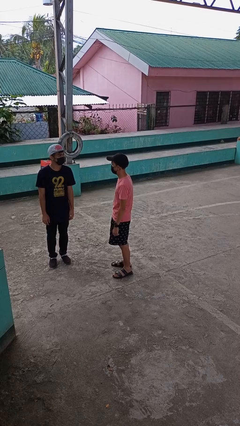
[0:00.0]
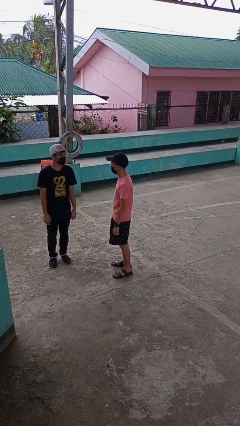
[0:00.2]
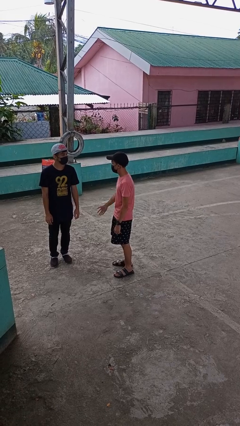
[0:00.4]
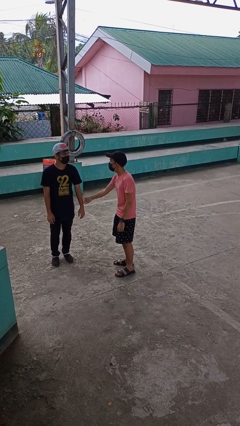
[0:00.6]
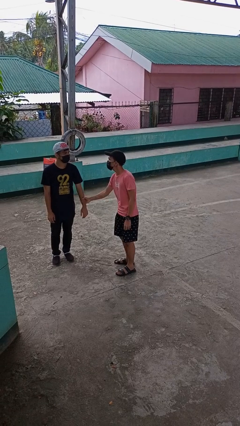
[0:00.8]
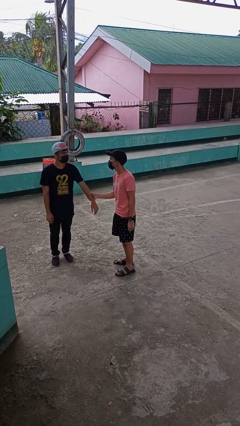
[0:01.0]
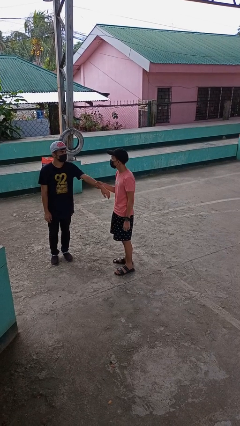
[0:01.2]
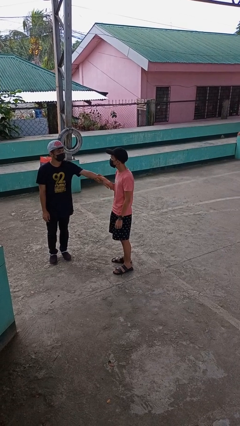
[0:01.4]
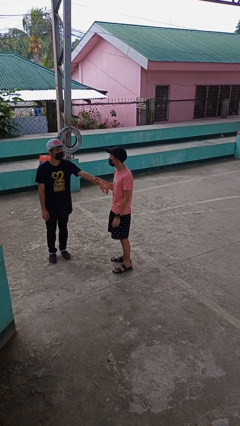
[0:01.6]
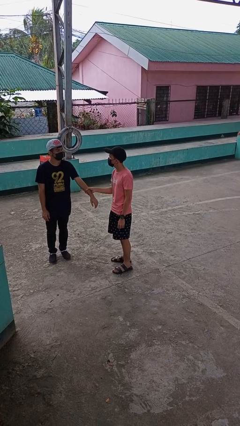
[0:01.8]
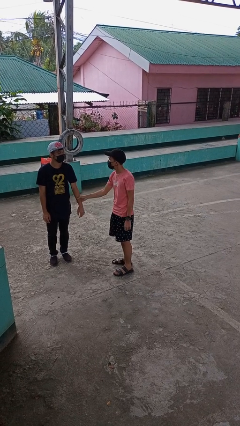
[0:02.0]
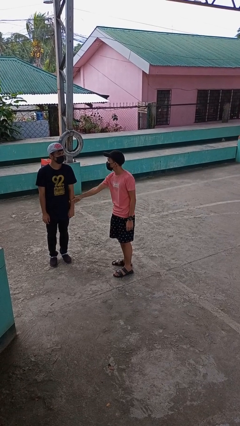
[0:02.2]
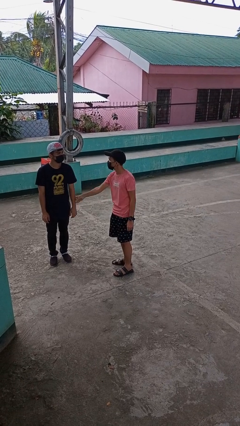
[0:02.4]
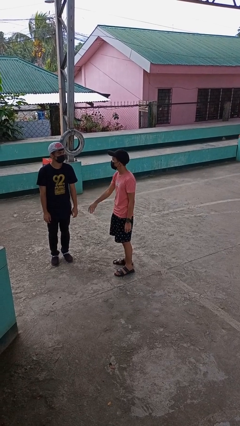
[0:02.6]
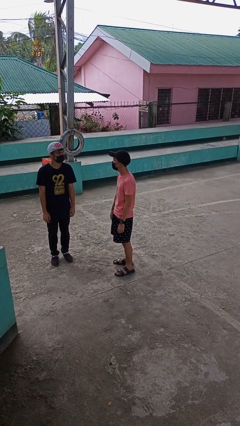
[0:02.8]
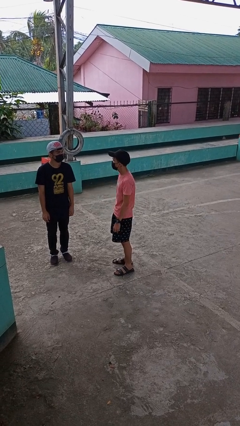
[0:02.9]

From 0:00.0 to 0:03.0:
person grabs person by forearm

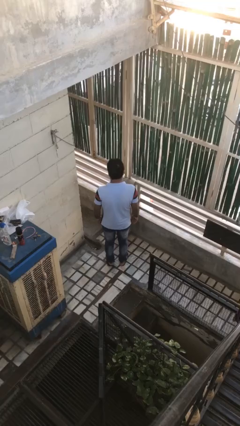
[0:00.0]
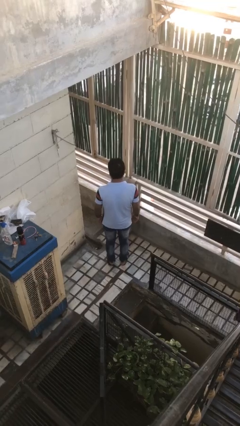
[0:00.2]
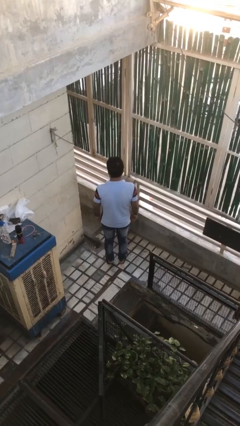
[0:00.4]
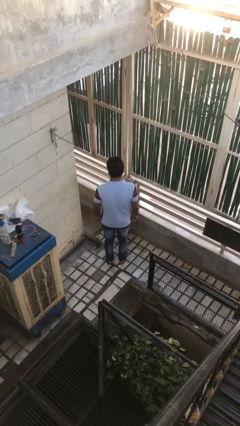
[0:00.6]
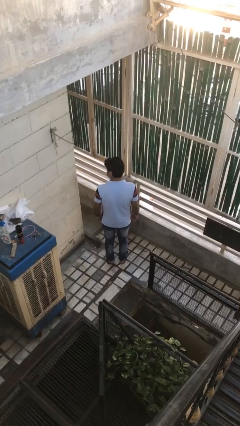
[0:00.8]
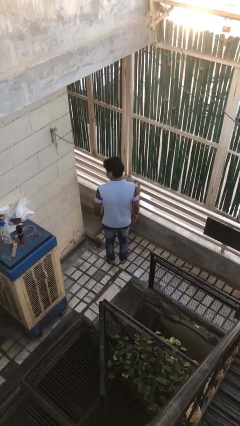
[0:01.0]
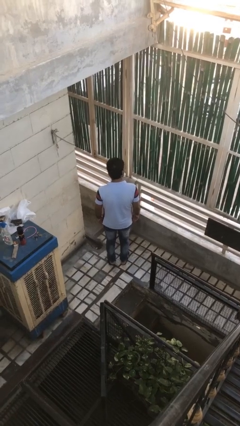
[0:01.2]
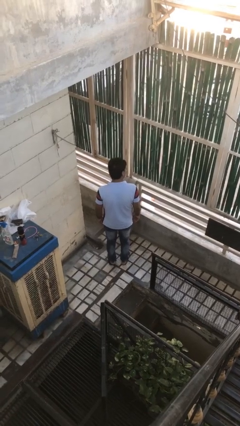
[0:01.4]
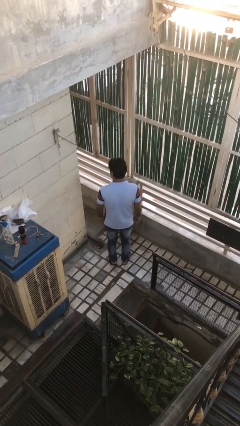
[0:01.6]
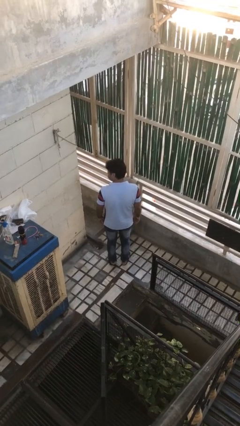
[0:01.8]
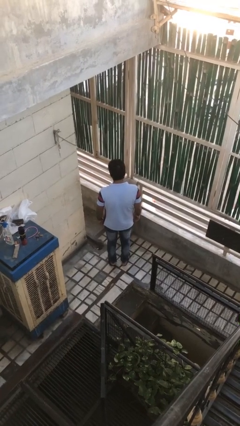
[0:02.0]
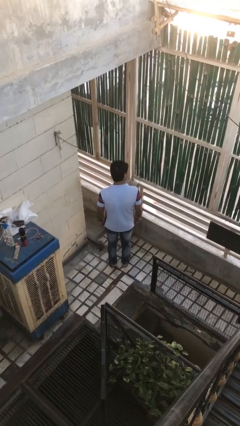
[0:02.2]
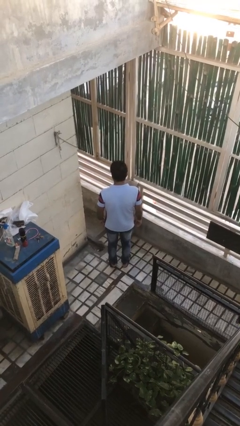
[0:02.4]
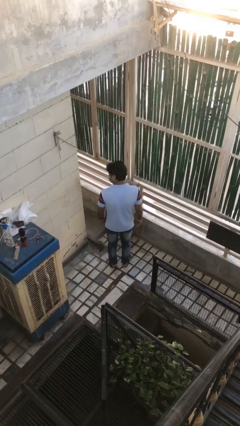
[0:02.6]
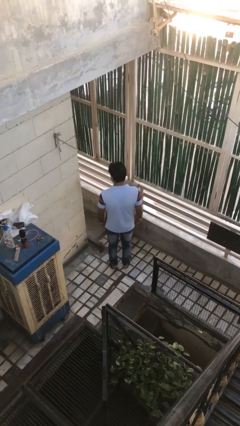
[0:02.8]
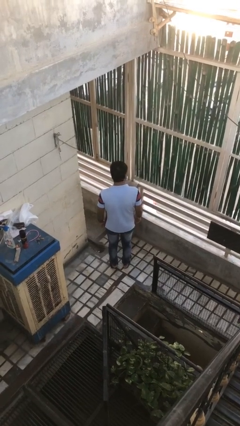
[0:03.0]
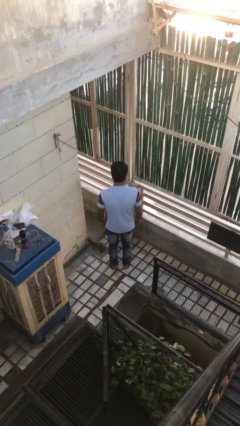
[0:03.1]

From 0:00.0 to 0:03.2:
person shakes head

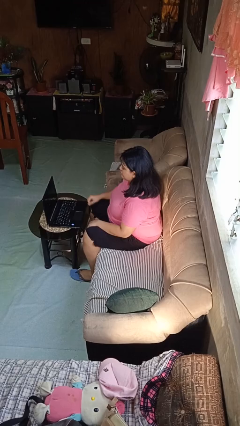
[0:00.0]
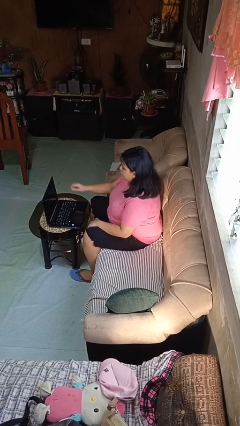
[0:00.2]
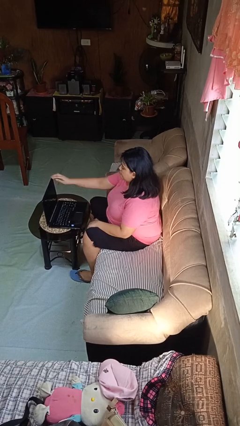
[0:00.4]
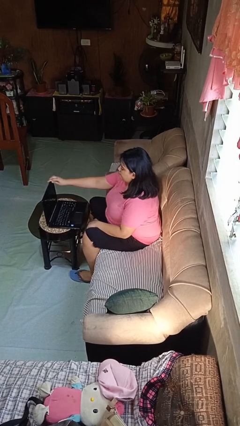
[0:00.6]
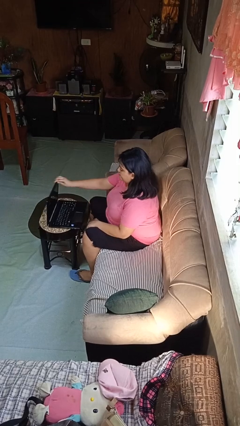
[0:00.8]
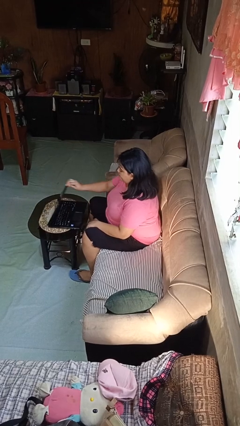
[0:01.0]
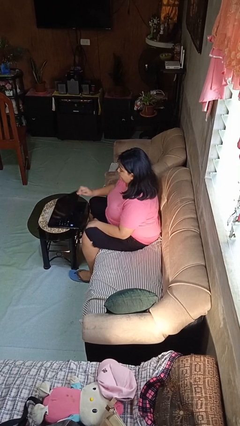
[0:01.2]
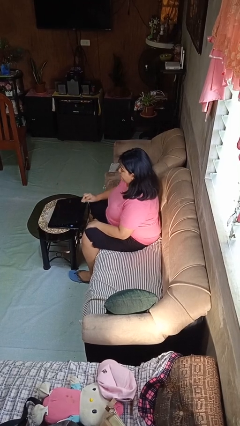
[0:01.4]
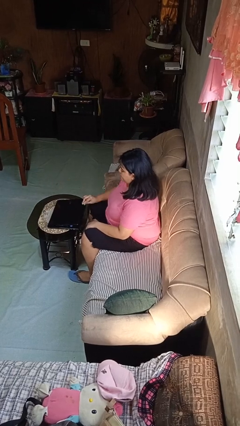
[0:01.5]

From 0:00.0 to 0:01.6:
person closes laptop

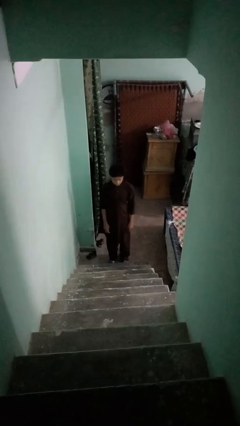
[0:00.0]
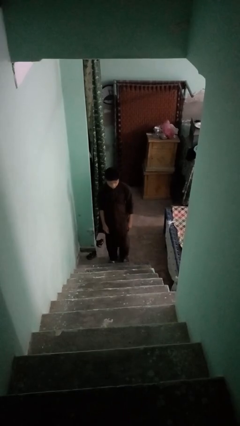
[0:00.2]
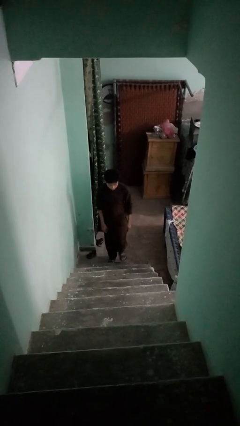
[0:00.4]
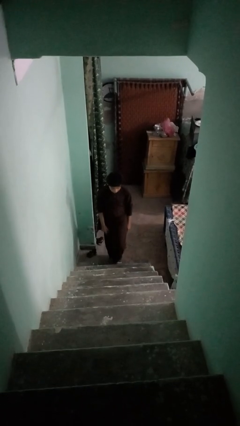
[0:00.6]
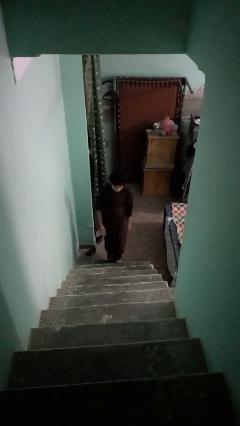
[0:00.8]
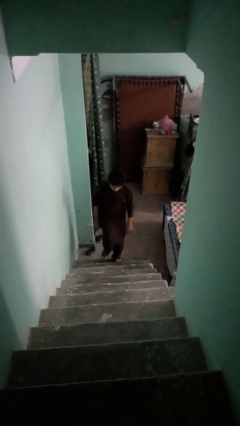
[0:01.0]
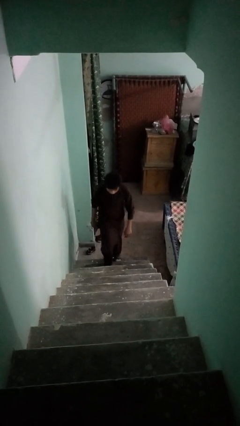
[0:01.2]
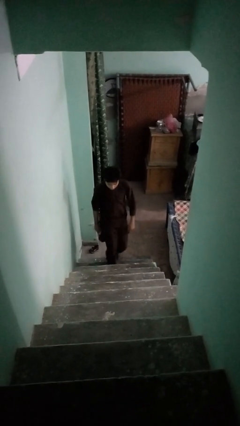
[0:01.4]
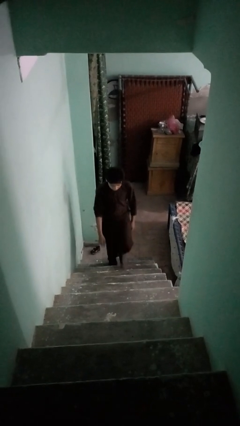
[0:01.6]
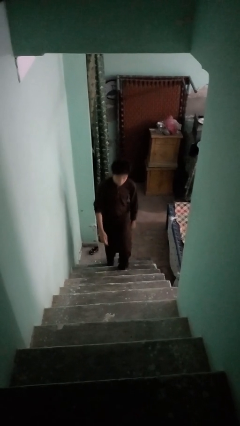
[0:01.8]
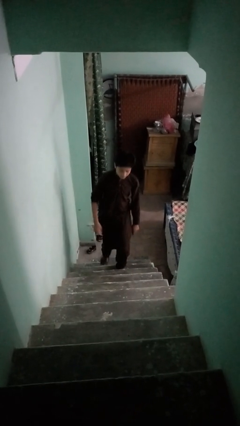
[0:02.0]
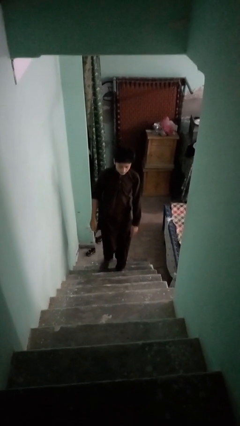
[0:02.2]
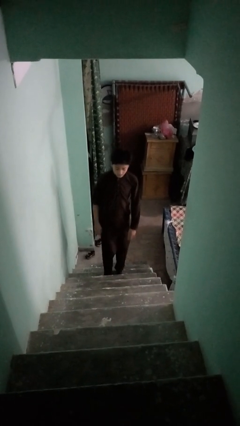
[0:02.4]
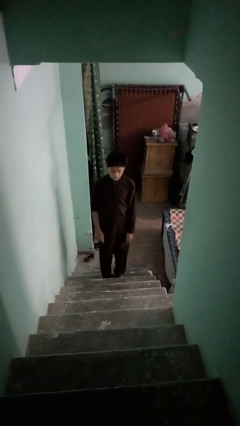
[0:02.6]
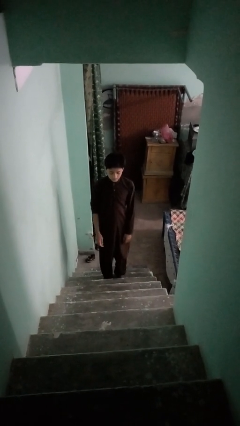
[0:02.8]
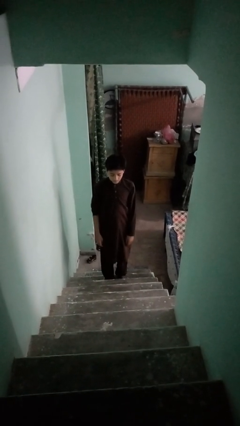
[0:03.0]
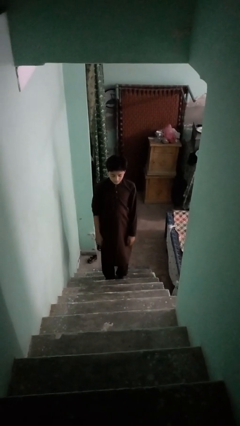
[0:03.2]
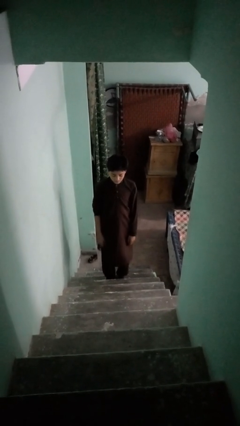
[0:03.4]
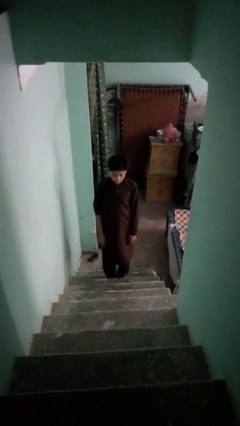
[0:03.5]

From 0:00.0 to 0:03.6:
person climbs up stairs

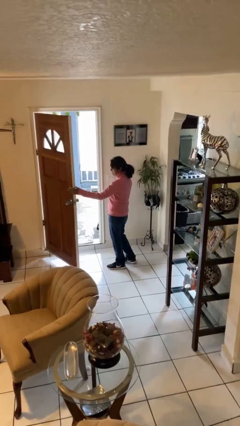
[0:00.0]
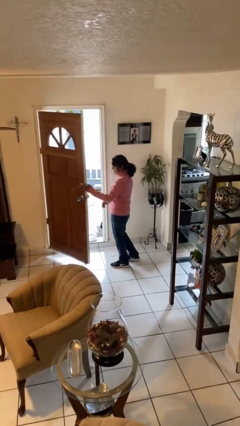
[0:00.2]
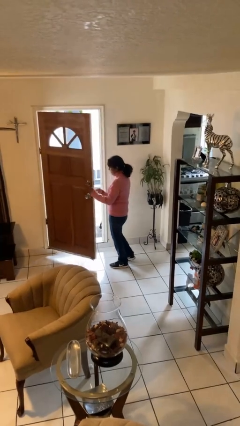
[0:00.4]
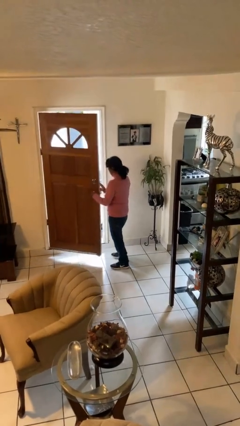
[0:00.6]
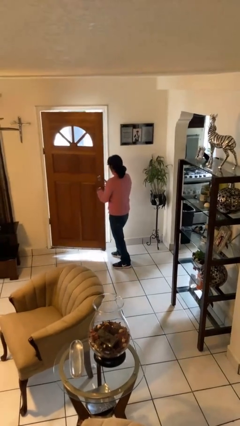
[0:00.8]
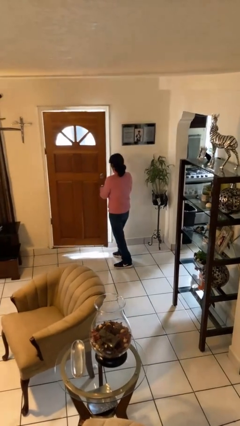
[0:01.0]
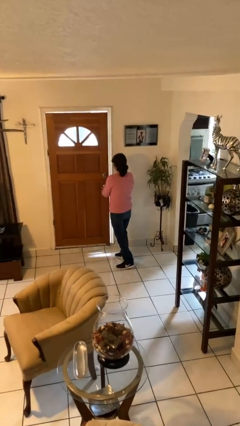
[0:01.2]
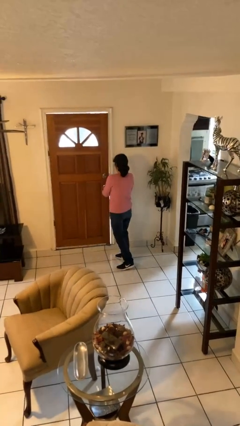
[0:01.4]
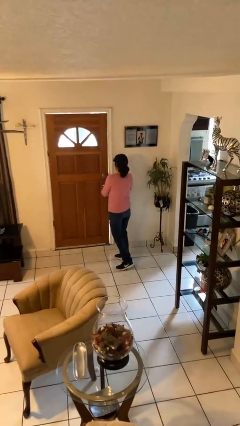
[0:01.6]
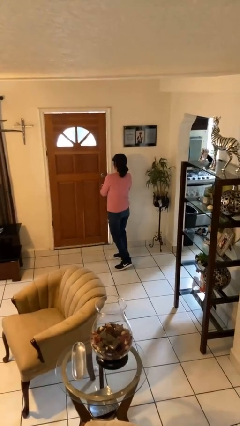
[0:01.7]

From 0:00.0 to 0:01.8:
person closes facility door

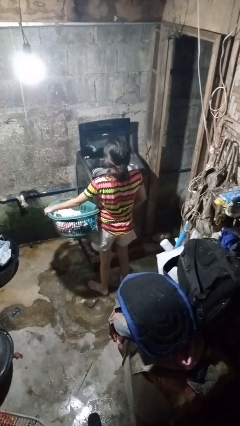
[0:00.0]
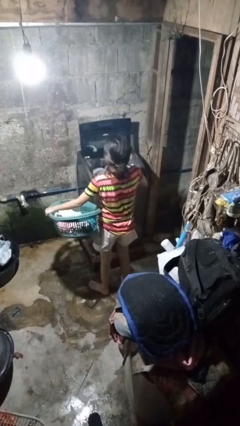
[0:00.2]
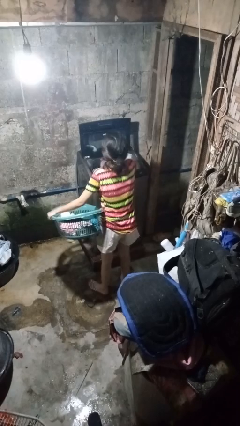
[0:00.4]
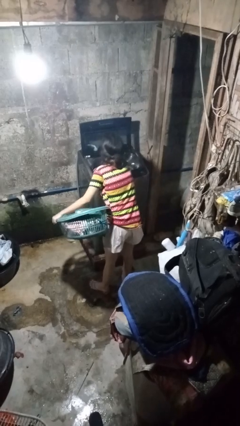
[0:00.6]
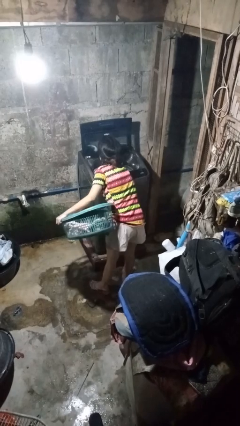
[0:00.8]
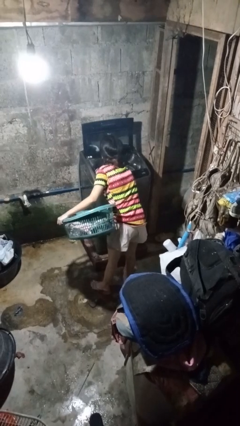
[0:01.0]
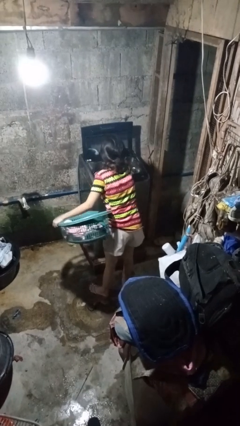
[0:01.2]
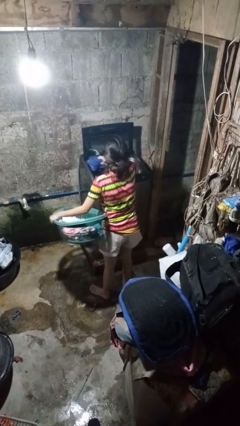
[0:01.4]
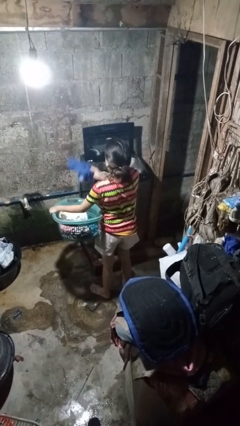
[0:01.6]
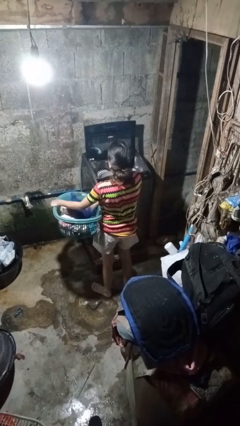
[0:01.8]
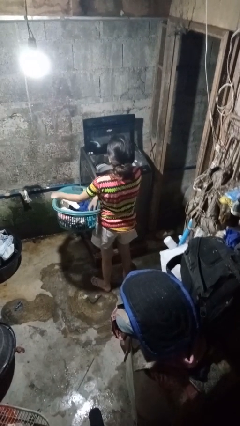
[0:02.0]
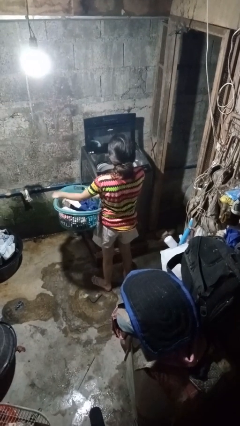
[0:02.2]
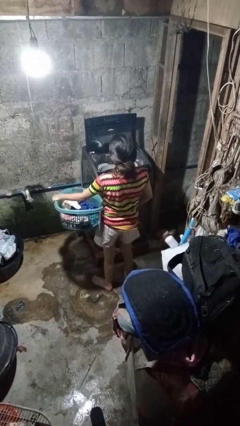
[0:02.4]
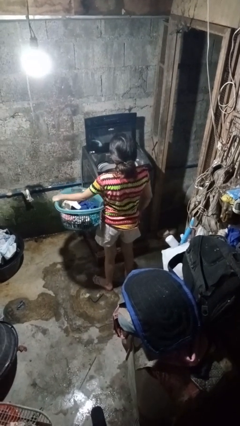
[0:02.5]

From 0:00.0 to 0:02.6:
person unloads clotheswasher

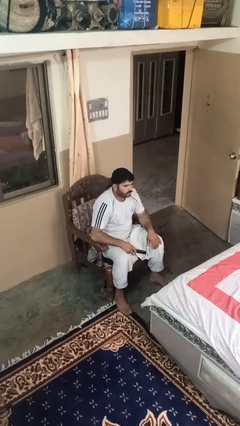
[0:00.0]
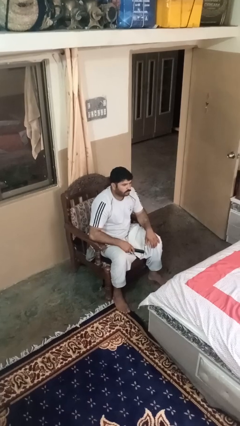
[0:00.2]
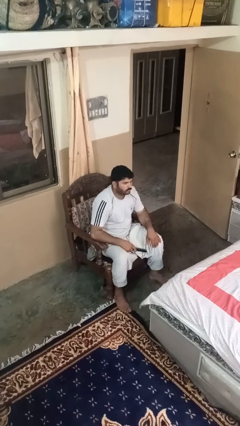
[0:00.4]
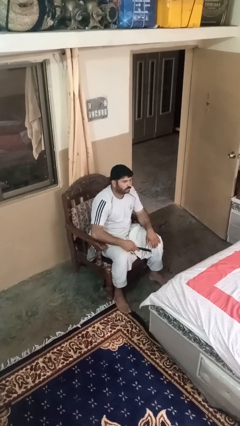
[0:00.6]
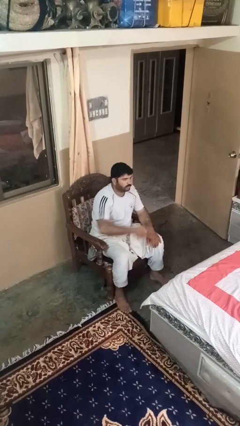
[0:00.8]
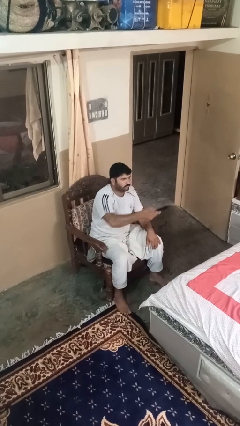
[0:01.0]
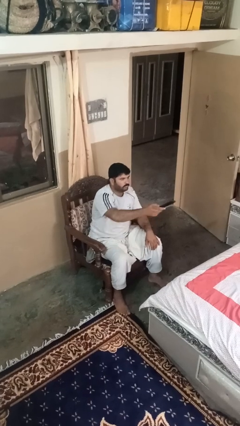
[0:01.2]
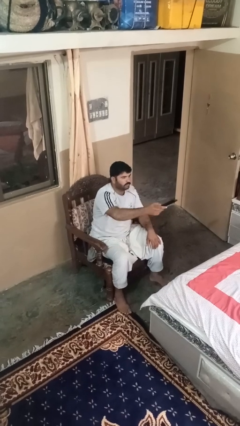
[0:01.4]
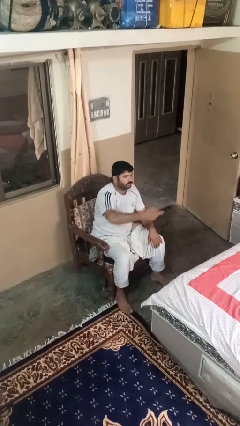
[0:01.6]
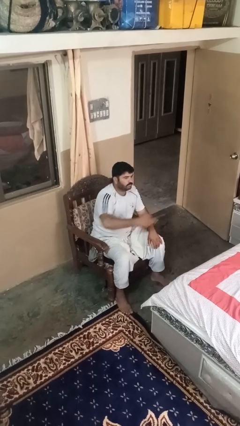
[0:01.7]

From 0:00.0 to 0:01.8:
person uses television remote
